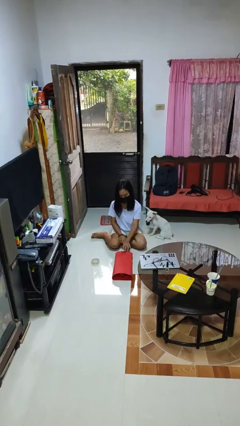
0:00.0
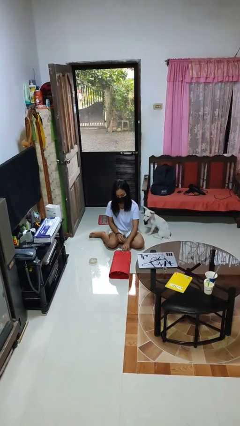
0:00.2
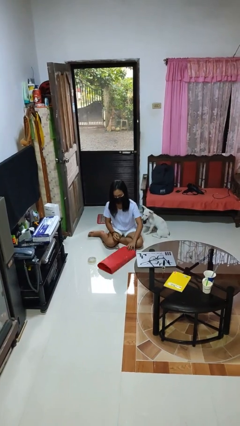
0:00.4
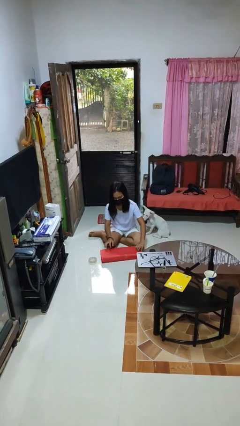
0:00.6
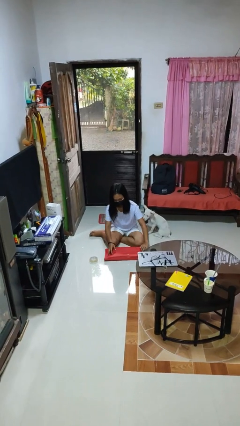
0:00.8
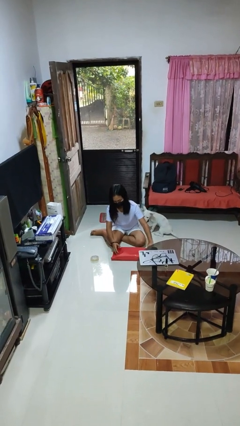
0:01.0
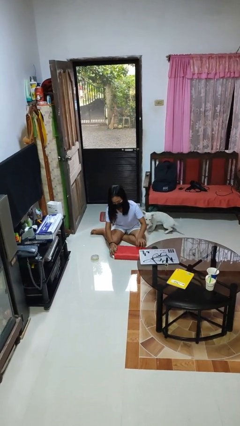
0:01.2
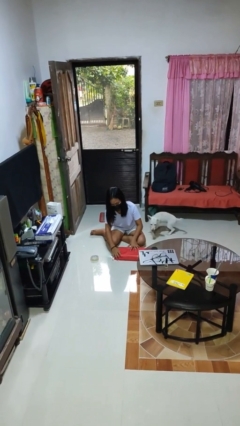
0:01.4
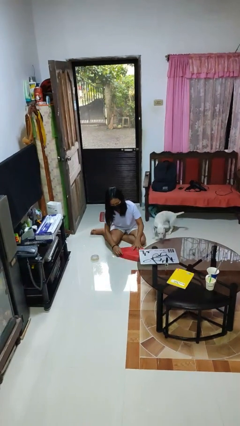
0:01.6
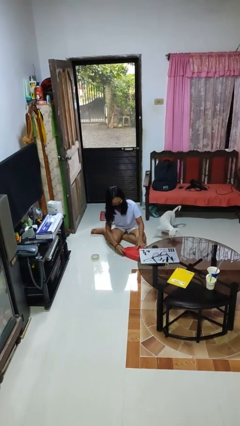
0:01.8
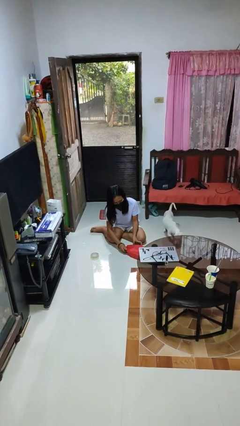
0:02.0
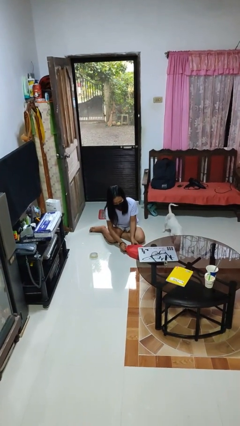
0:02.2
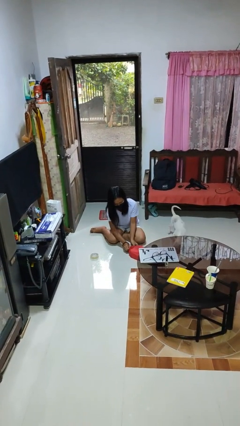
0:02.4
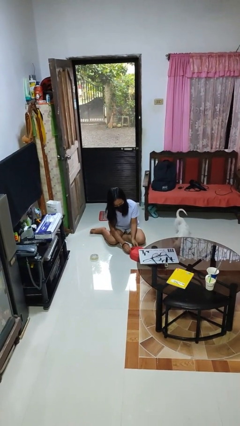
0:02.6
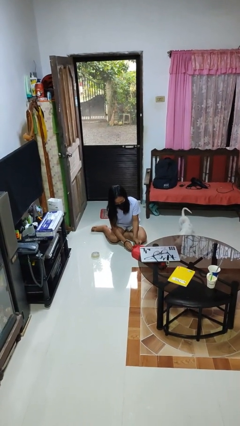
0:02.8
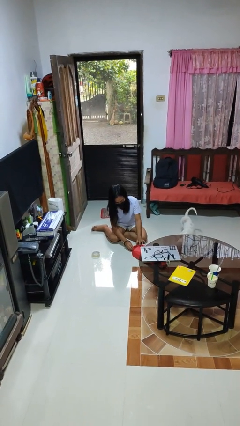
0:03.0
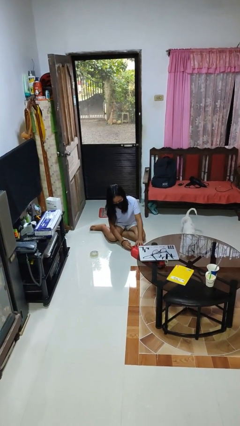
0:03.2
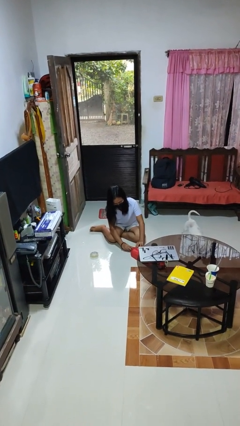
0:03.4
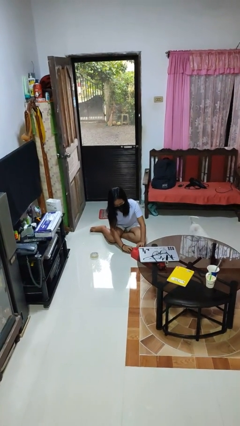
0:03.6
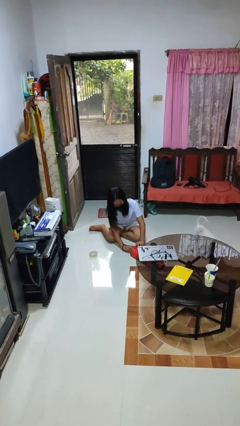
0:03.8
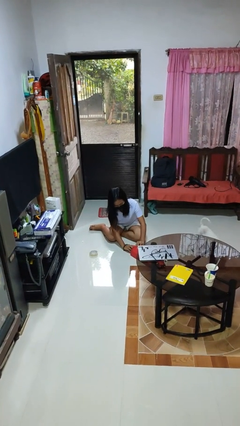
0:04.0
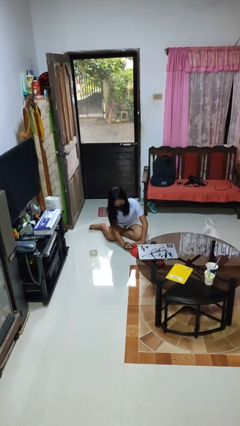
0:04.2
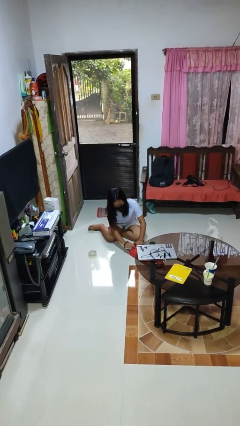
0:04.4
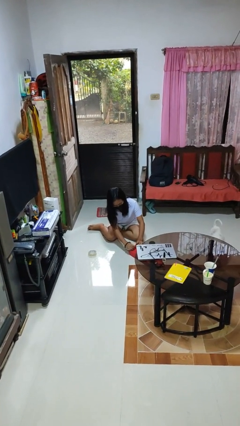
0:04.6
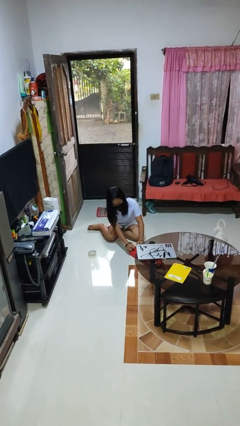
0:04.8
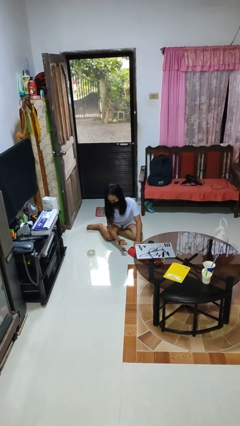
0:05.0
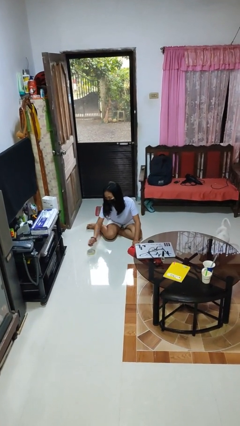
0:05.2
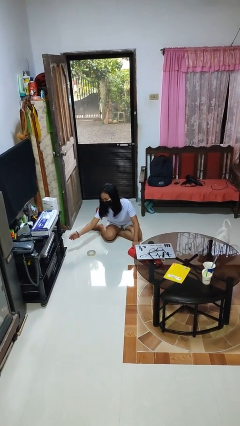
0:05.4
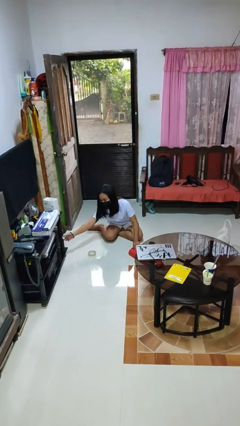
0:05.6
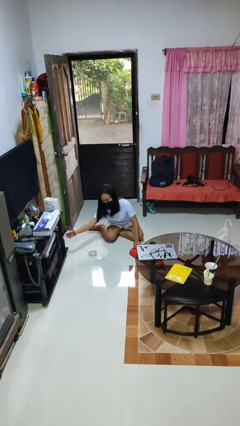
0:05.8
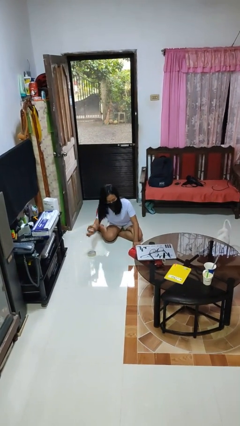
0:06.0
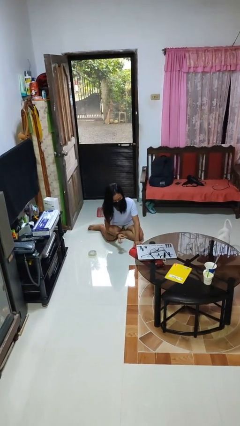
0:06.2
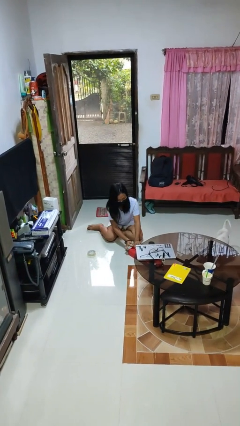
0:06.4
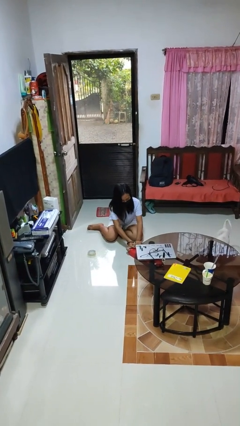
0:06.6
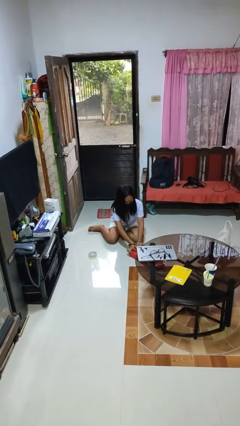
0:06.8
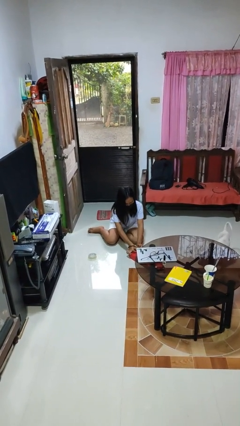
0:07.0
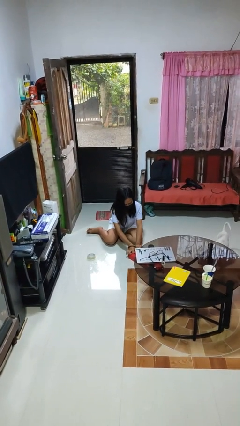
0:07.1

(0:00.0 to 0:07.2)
person wraps box

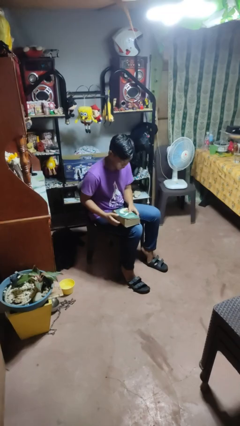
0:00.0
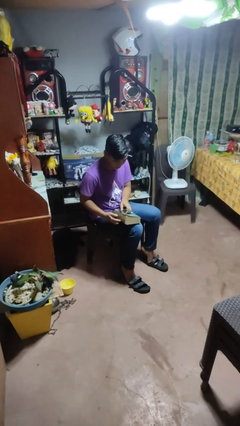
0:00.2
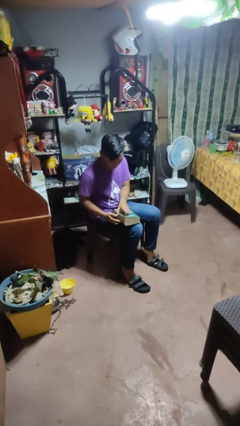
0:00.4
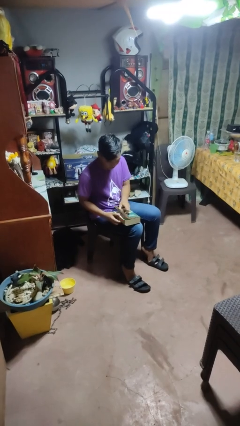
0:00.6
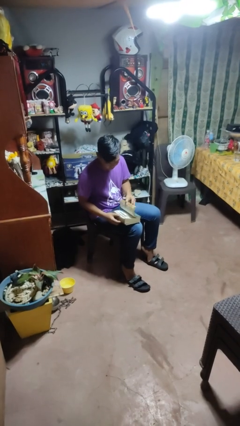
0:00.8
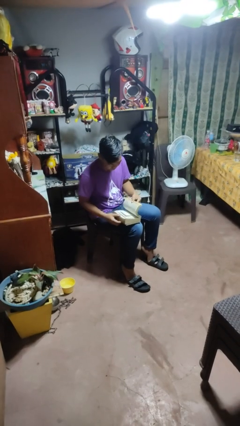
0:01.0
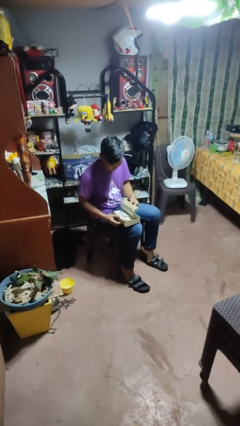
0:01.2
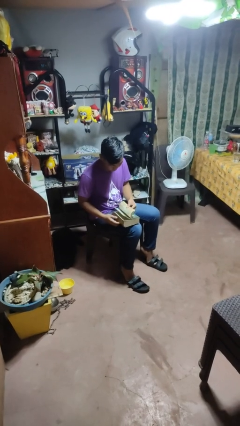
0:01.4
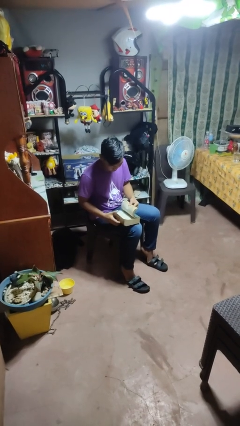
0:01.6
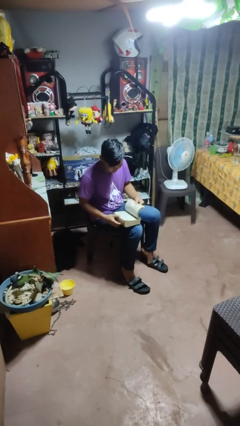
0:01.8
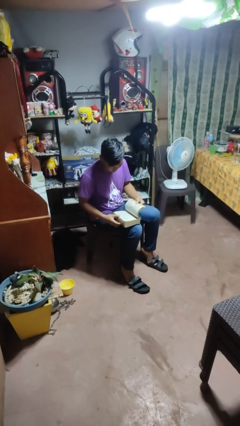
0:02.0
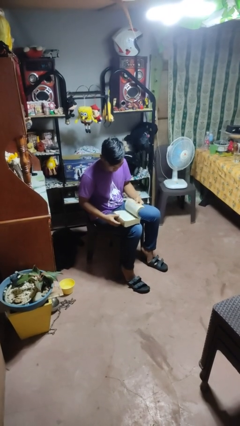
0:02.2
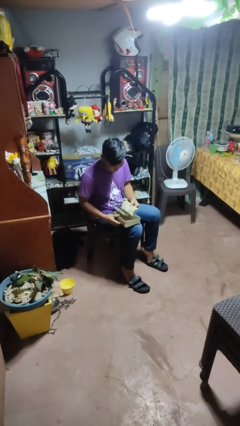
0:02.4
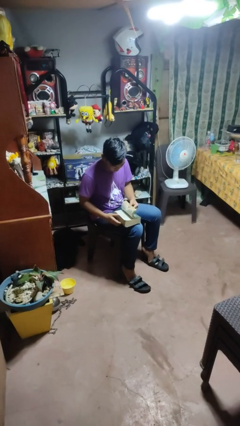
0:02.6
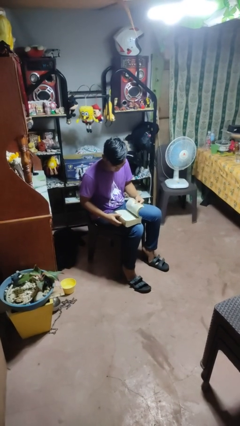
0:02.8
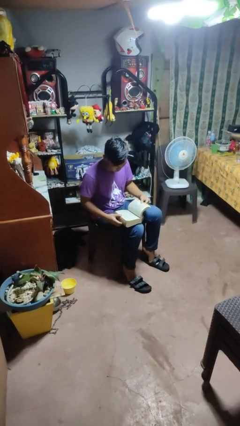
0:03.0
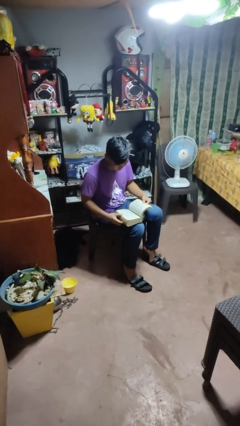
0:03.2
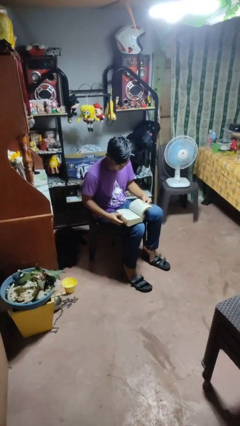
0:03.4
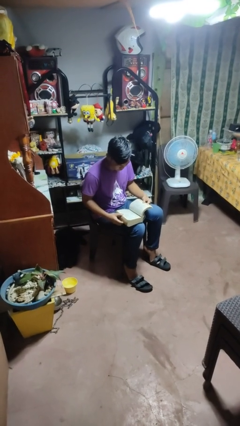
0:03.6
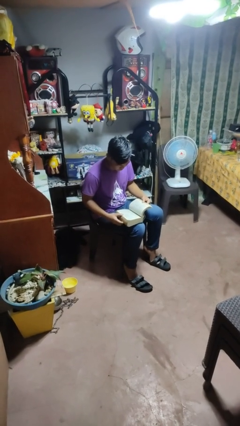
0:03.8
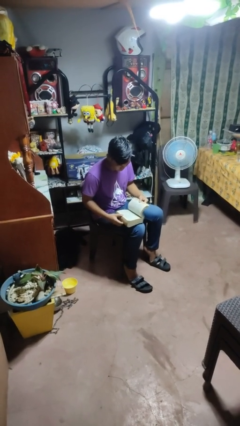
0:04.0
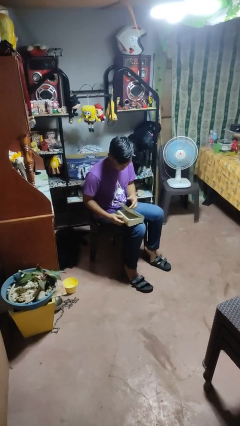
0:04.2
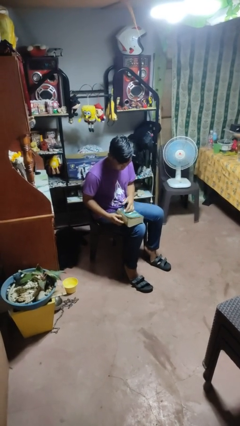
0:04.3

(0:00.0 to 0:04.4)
person reads book

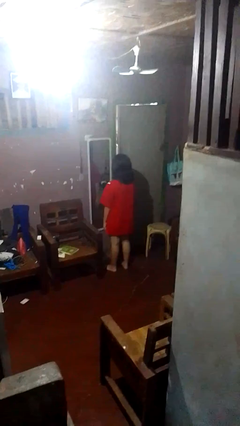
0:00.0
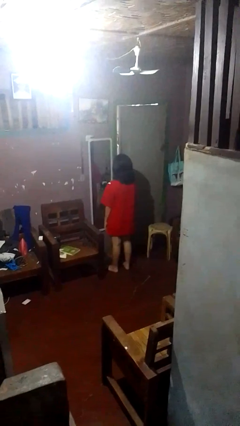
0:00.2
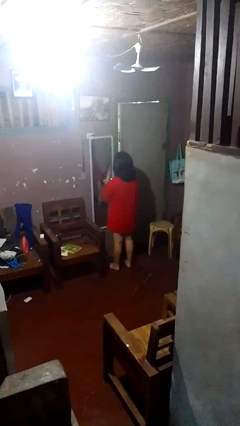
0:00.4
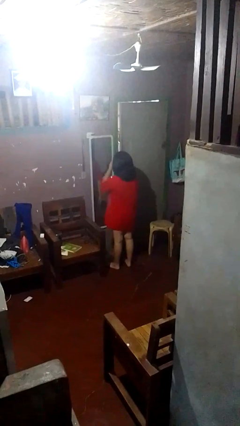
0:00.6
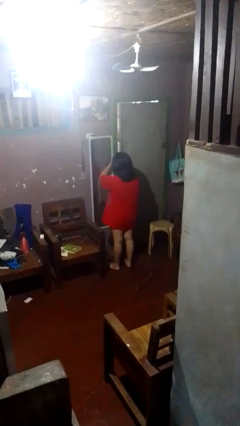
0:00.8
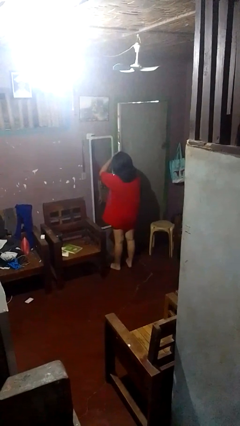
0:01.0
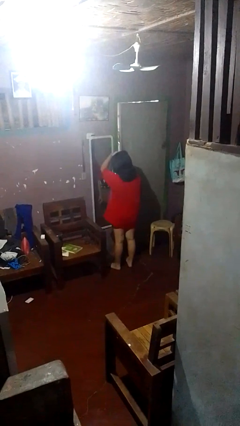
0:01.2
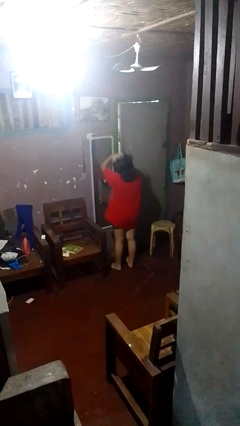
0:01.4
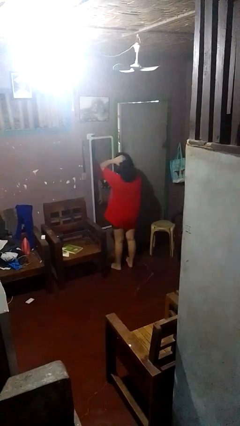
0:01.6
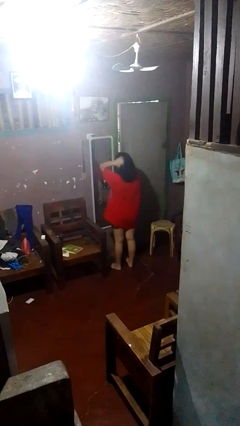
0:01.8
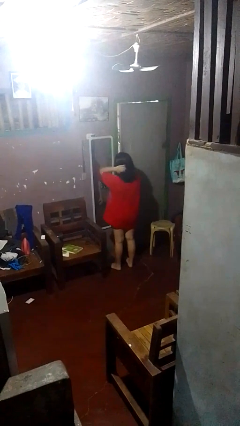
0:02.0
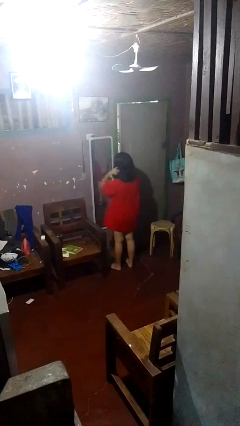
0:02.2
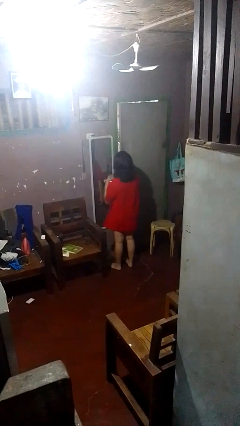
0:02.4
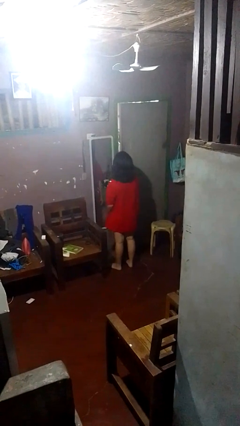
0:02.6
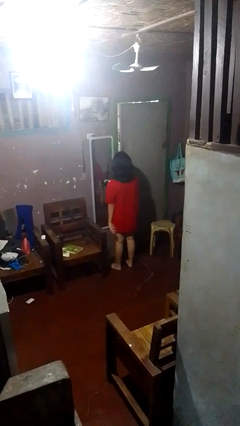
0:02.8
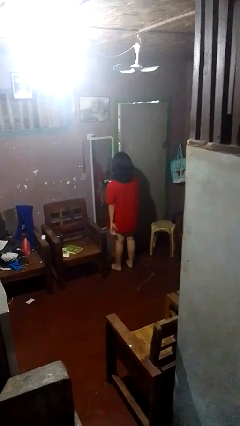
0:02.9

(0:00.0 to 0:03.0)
person strokes hair

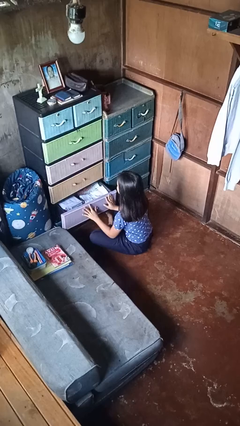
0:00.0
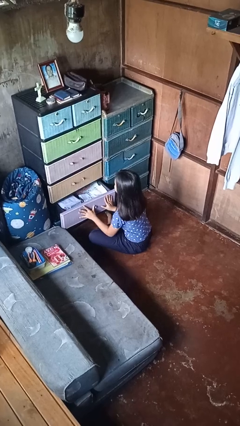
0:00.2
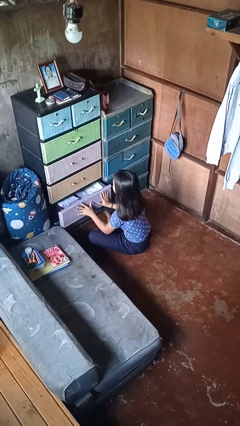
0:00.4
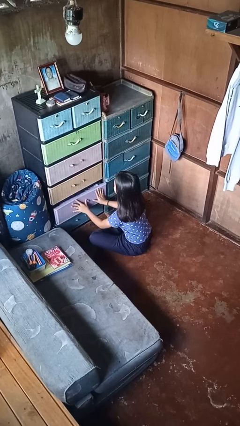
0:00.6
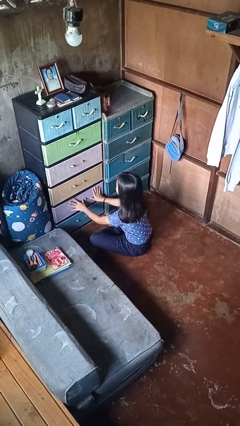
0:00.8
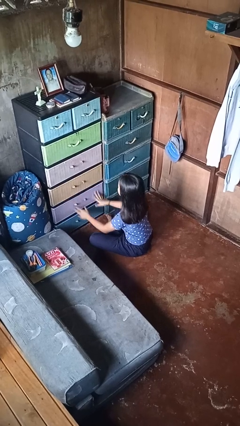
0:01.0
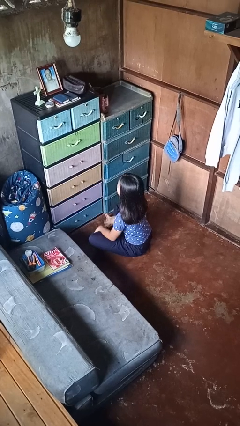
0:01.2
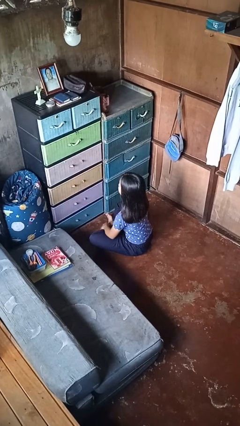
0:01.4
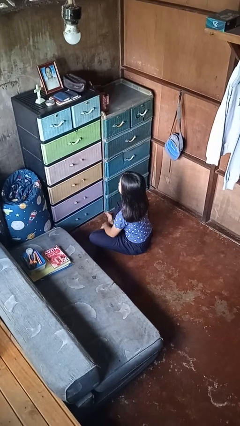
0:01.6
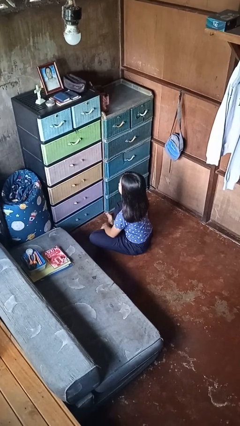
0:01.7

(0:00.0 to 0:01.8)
person closes dresser drawer

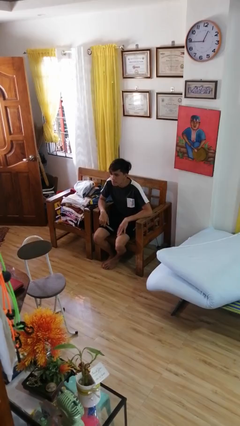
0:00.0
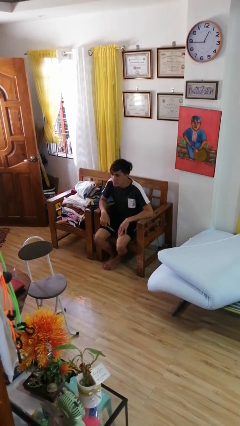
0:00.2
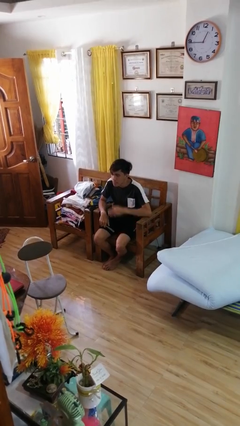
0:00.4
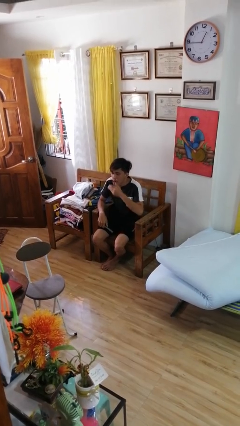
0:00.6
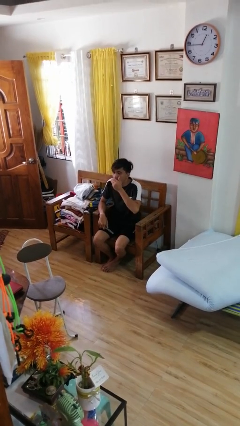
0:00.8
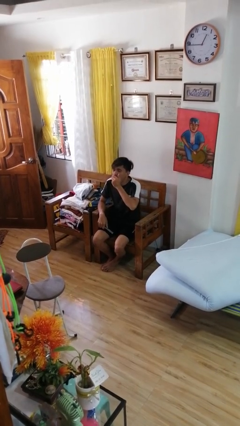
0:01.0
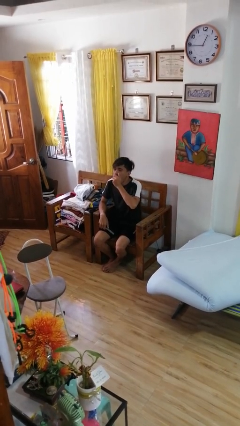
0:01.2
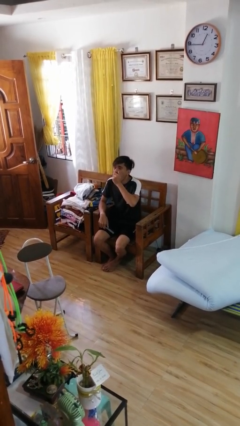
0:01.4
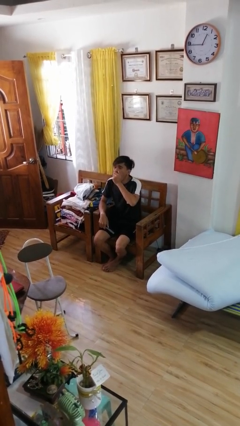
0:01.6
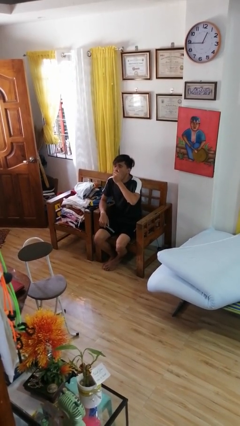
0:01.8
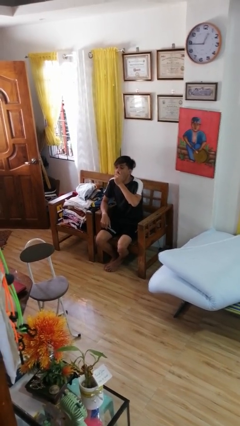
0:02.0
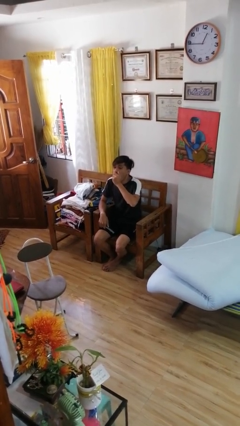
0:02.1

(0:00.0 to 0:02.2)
person yawns
